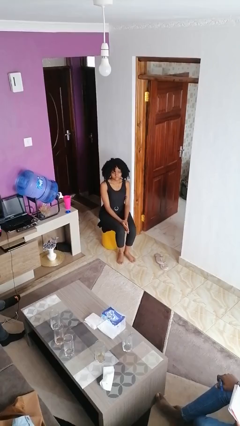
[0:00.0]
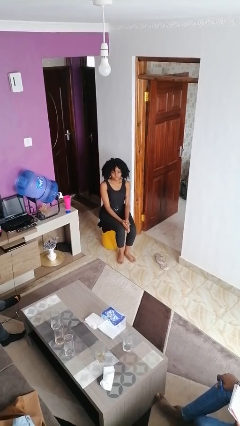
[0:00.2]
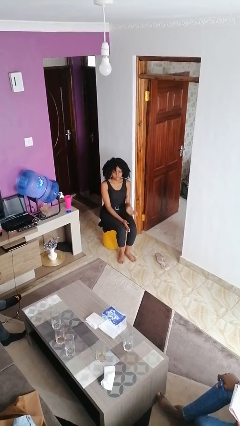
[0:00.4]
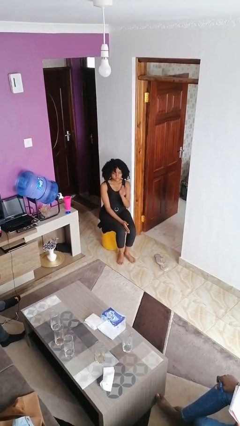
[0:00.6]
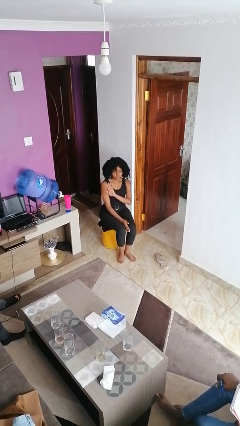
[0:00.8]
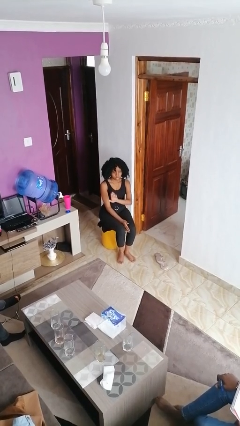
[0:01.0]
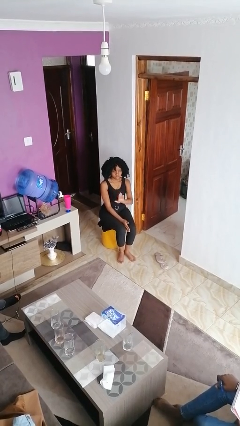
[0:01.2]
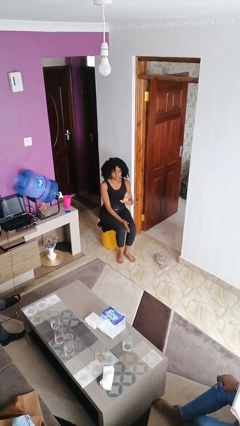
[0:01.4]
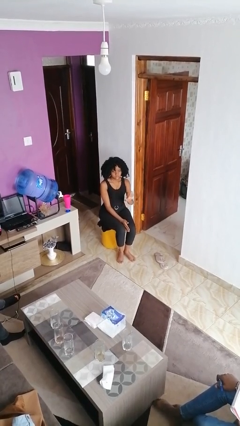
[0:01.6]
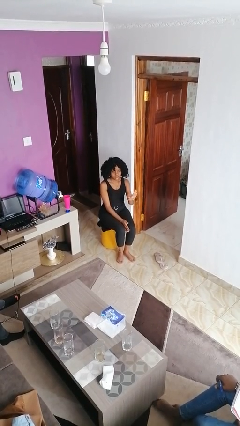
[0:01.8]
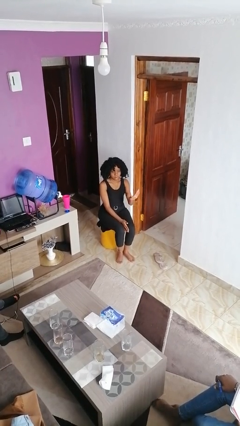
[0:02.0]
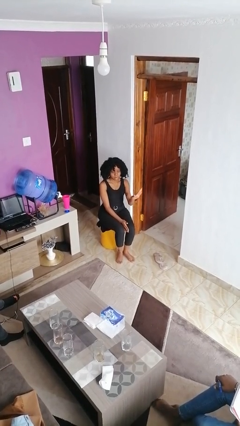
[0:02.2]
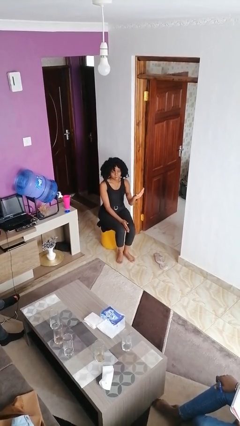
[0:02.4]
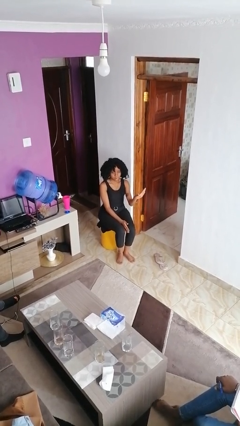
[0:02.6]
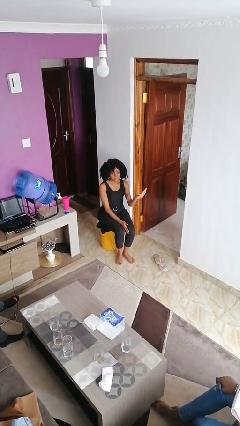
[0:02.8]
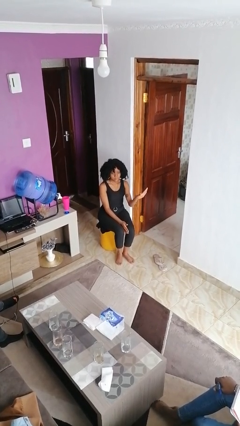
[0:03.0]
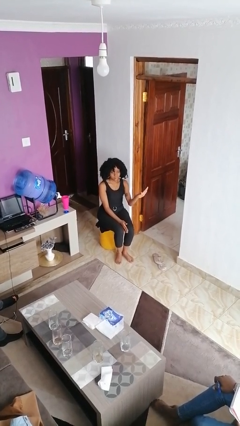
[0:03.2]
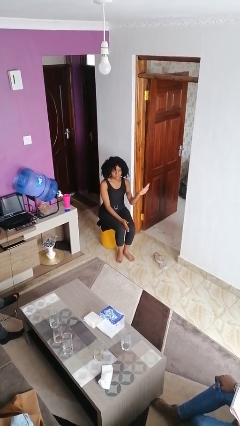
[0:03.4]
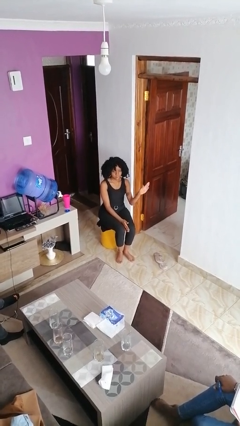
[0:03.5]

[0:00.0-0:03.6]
person gestures swipe left

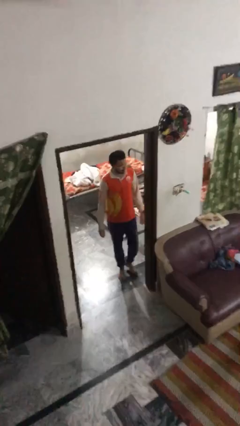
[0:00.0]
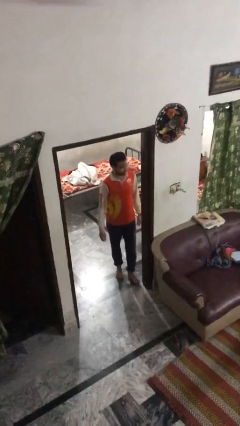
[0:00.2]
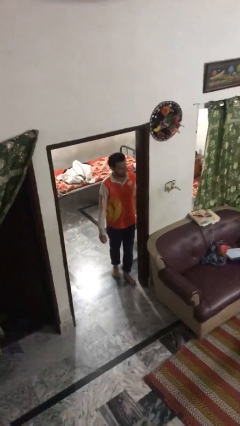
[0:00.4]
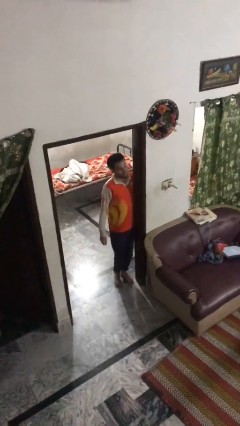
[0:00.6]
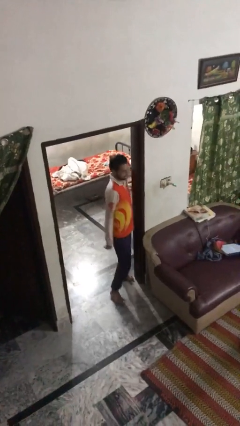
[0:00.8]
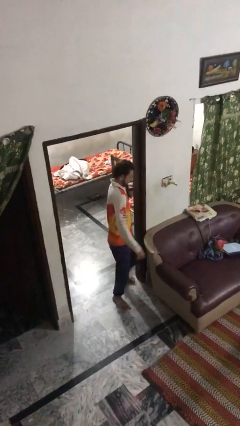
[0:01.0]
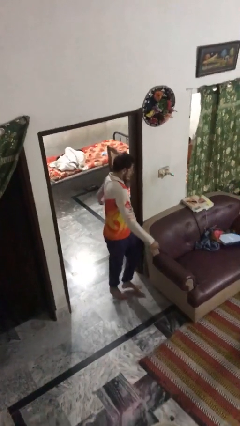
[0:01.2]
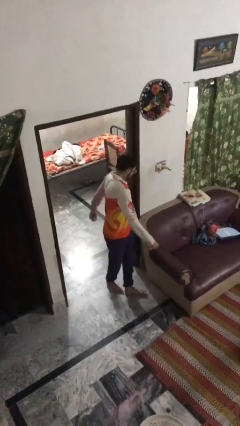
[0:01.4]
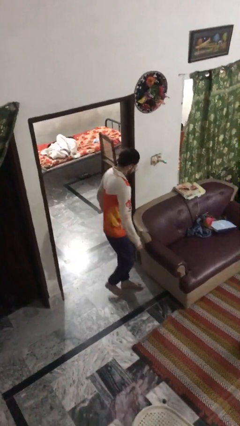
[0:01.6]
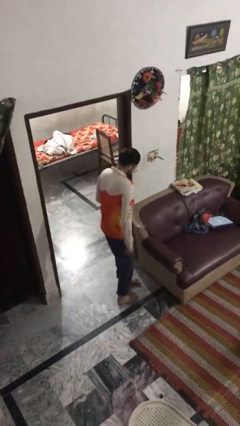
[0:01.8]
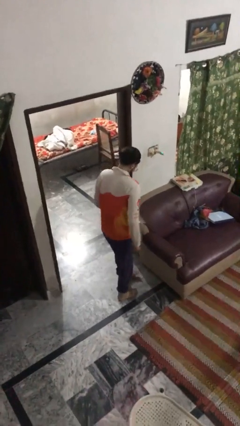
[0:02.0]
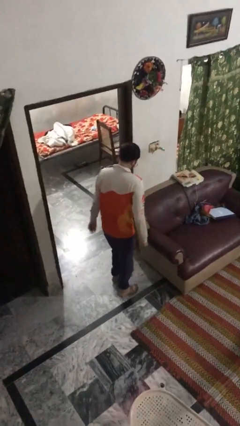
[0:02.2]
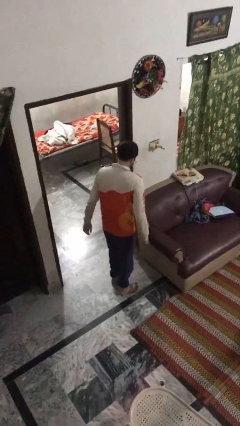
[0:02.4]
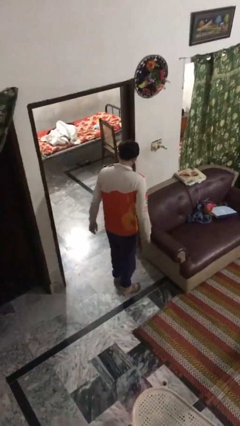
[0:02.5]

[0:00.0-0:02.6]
person bumps into wall

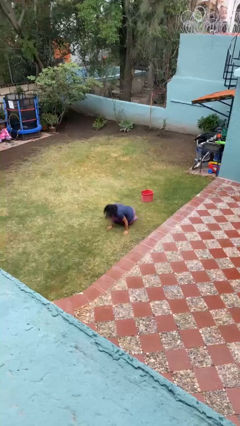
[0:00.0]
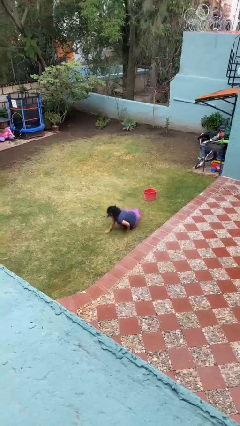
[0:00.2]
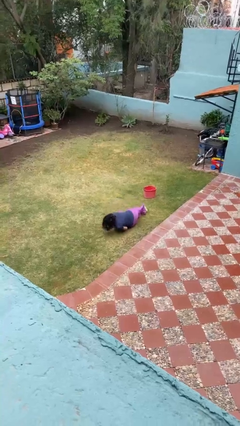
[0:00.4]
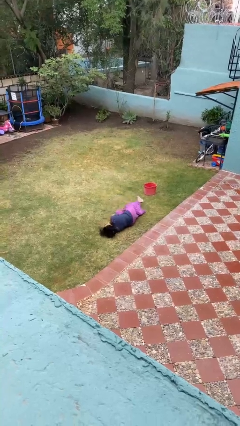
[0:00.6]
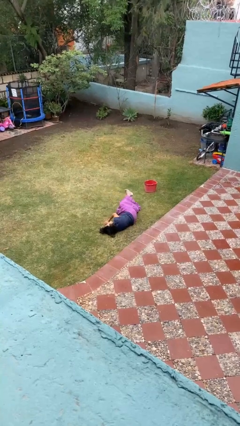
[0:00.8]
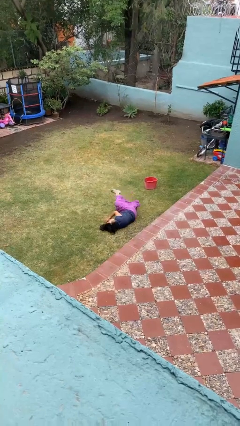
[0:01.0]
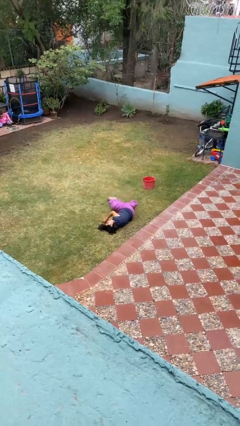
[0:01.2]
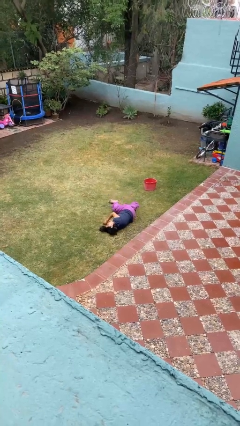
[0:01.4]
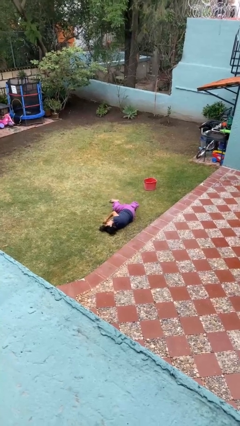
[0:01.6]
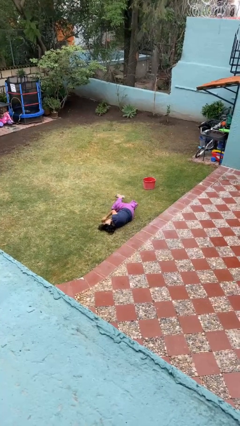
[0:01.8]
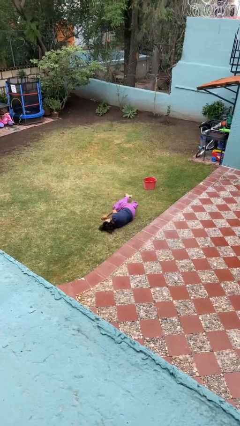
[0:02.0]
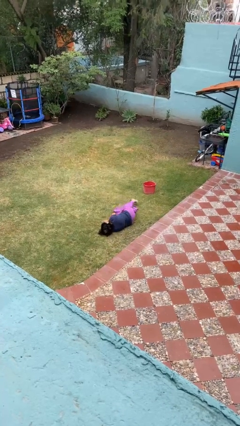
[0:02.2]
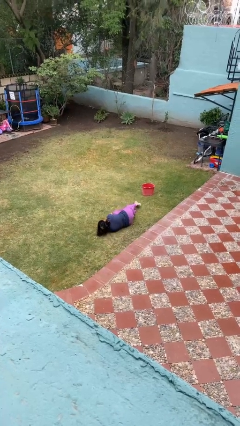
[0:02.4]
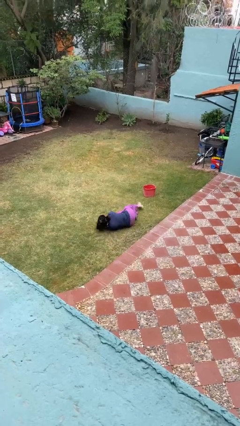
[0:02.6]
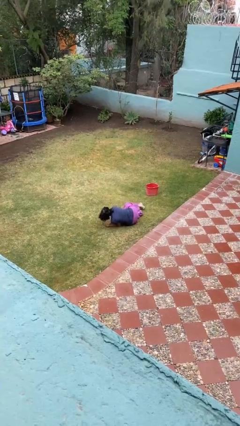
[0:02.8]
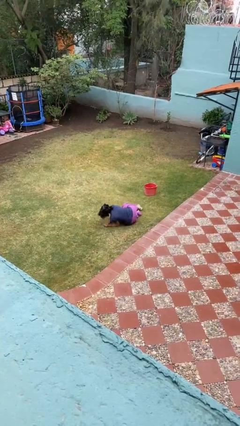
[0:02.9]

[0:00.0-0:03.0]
person lies down on floor

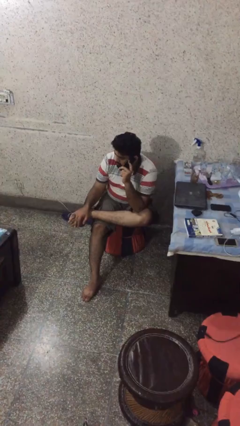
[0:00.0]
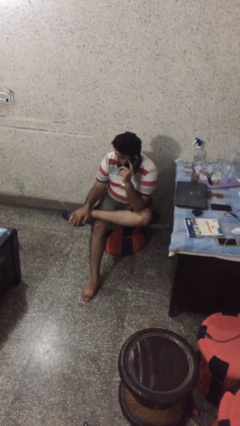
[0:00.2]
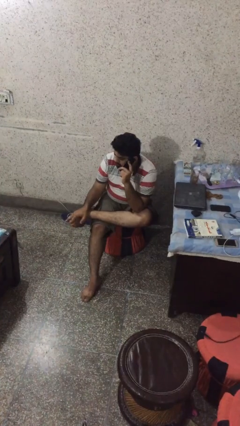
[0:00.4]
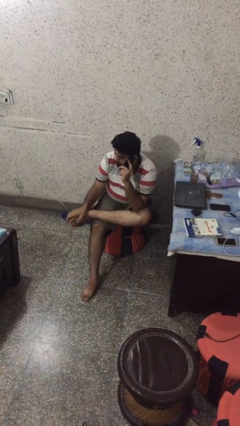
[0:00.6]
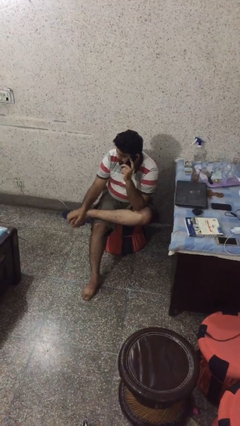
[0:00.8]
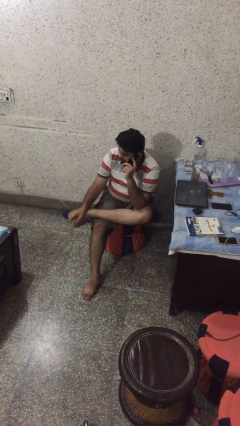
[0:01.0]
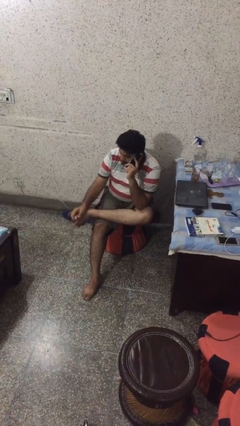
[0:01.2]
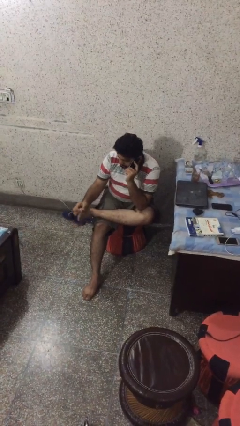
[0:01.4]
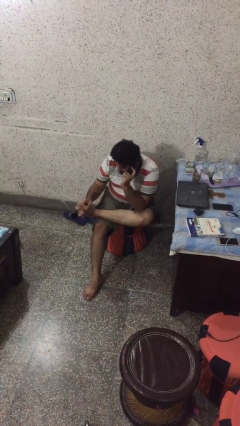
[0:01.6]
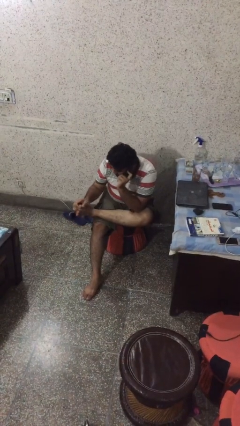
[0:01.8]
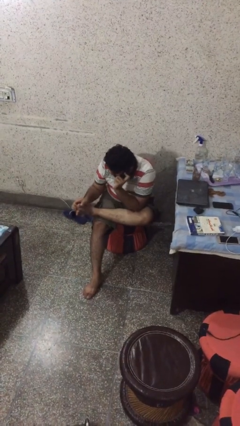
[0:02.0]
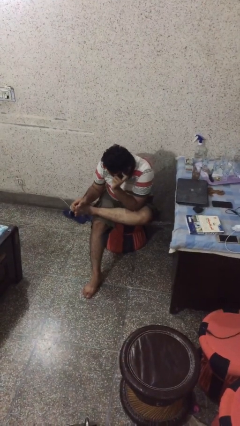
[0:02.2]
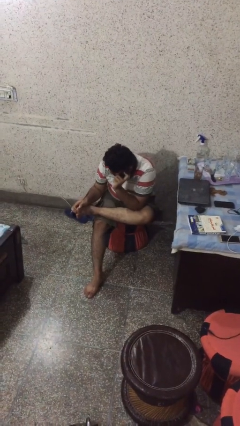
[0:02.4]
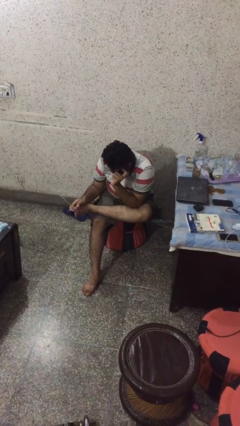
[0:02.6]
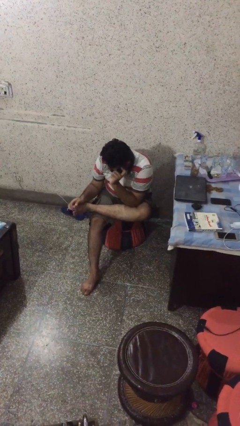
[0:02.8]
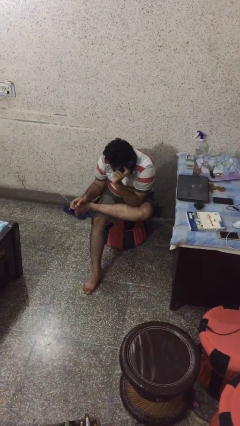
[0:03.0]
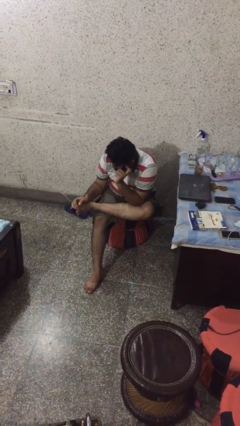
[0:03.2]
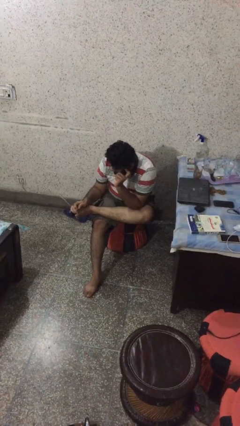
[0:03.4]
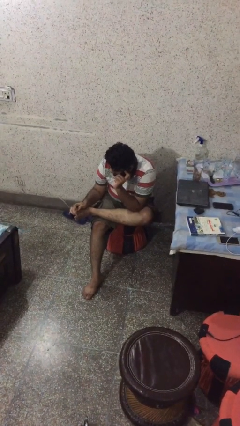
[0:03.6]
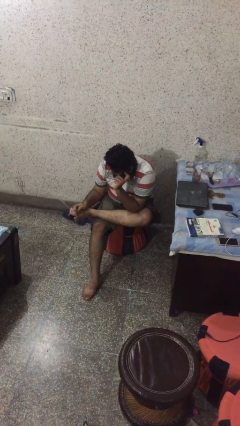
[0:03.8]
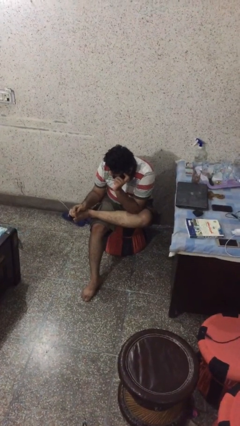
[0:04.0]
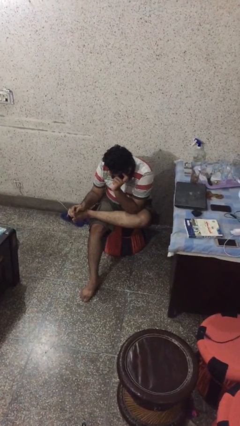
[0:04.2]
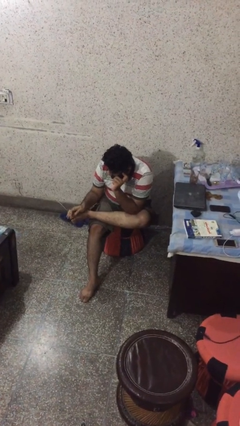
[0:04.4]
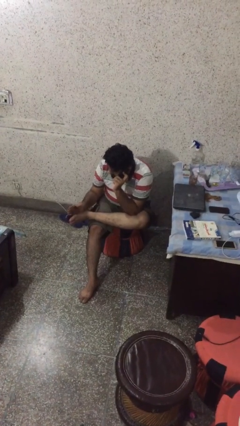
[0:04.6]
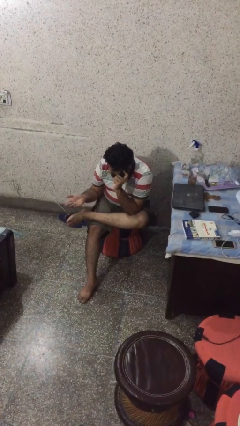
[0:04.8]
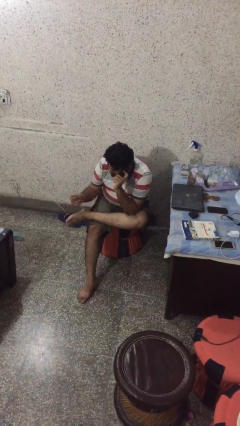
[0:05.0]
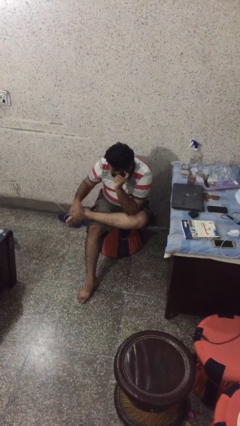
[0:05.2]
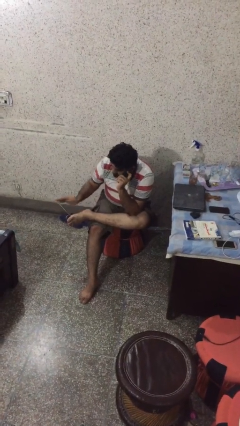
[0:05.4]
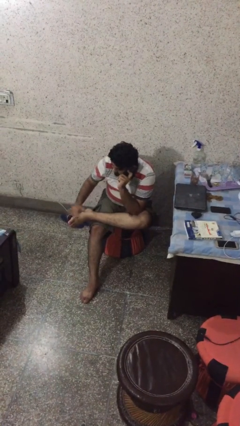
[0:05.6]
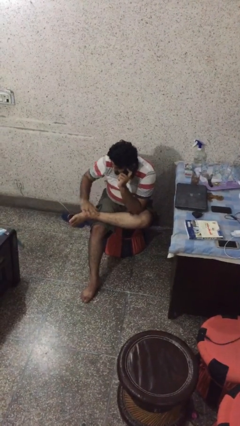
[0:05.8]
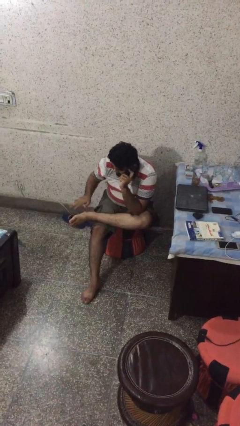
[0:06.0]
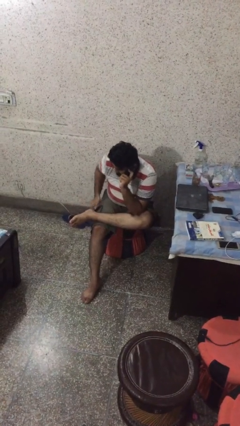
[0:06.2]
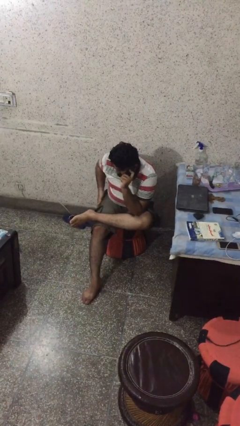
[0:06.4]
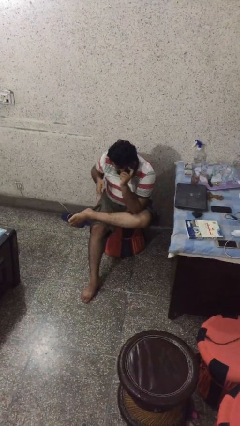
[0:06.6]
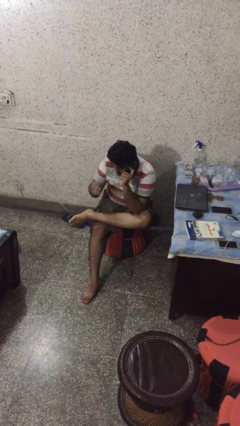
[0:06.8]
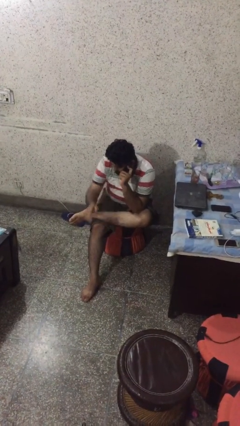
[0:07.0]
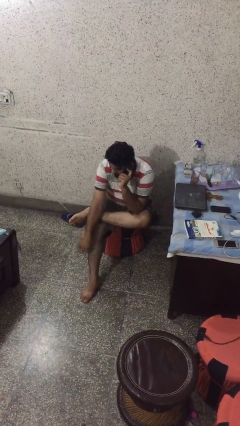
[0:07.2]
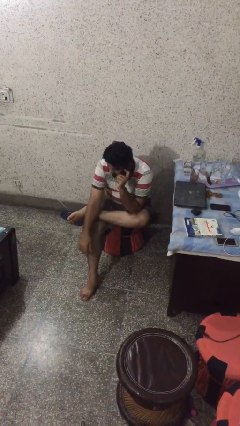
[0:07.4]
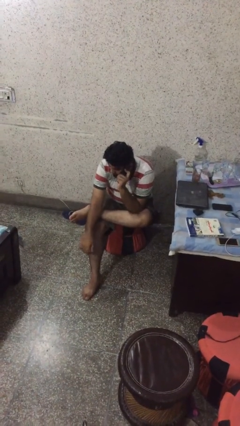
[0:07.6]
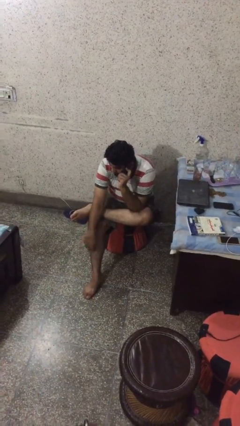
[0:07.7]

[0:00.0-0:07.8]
person talks on phone

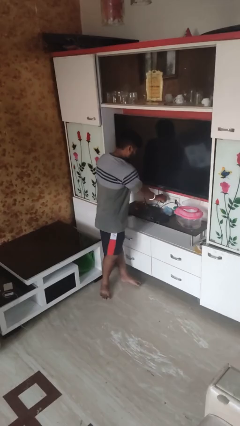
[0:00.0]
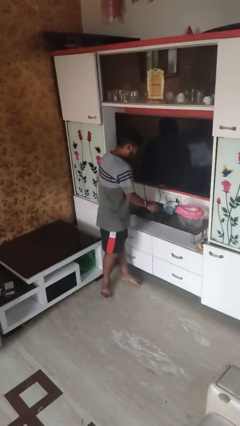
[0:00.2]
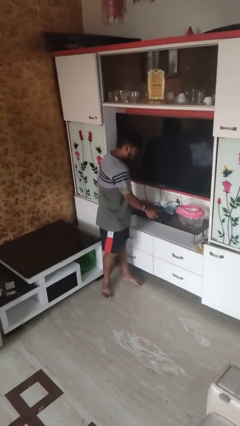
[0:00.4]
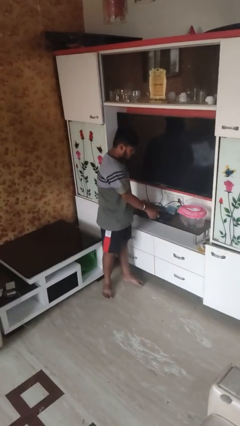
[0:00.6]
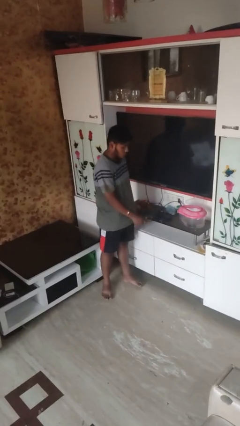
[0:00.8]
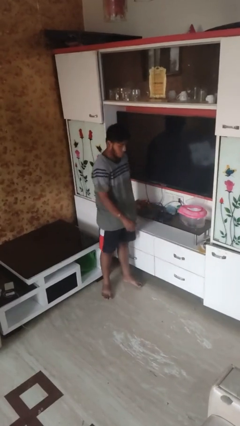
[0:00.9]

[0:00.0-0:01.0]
person unplugs from electrical socket
